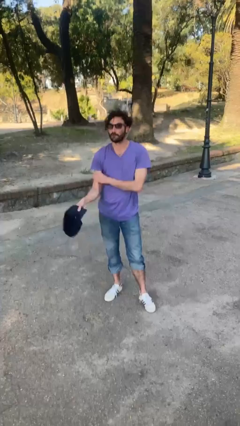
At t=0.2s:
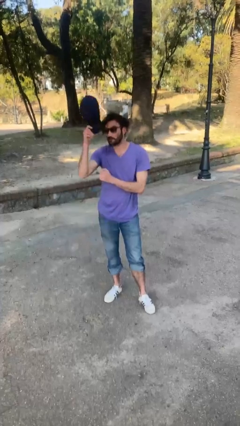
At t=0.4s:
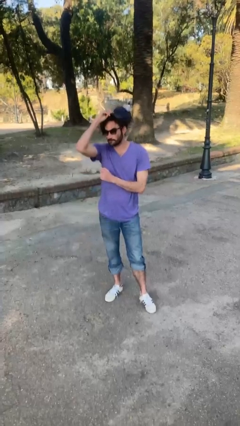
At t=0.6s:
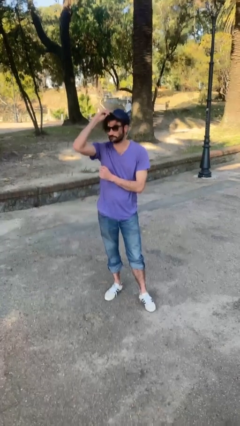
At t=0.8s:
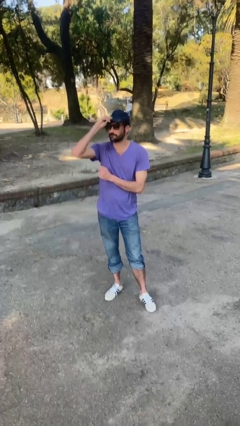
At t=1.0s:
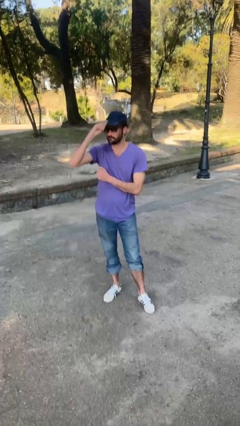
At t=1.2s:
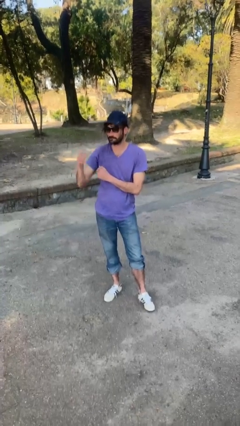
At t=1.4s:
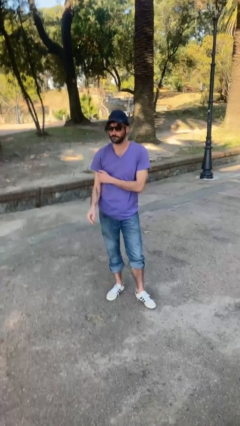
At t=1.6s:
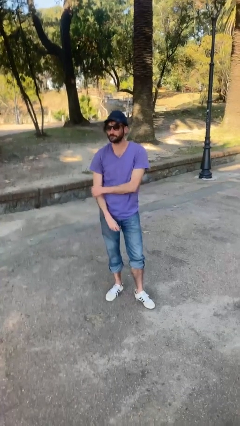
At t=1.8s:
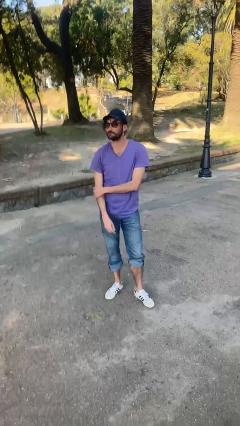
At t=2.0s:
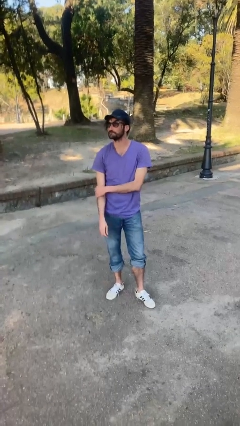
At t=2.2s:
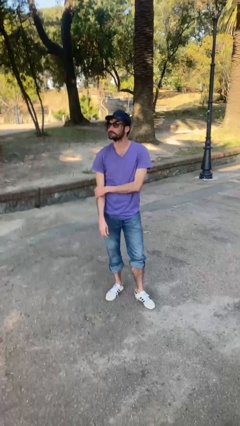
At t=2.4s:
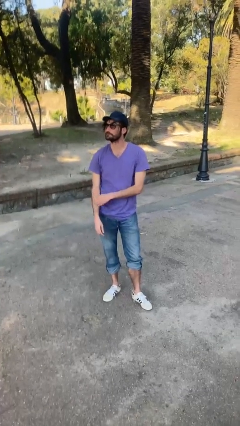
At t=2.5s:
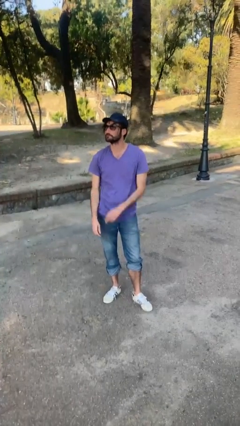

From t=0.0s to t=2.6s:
person puts on hat

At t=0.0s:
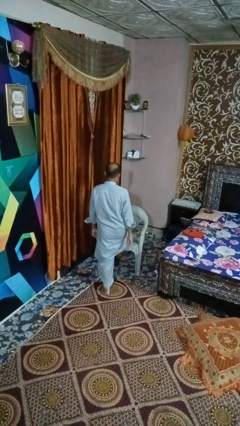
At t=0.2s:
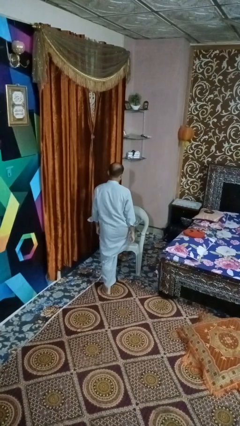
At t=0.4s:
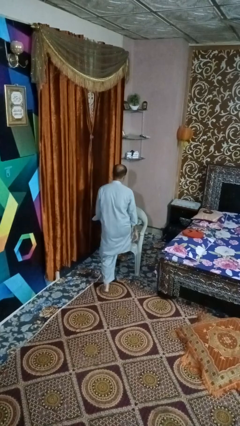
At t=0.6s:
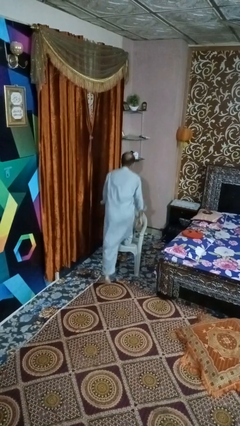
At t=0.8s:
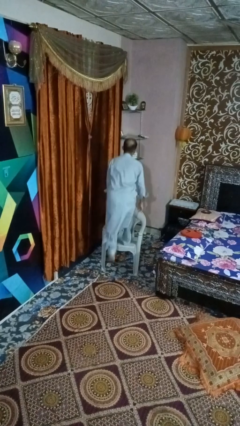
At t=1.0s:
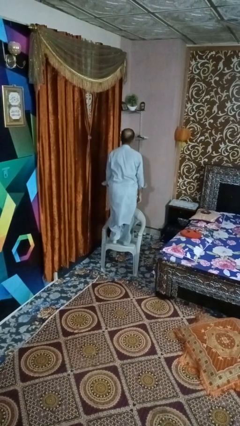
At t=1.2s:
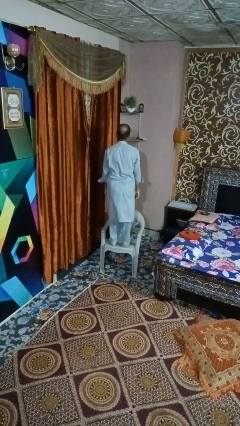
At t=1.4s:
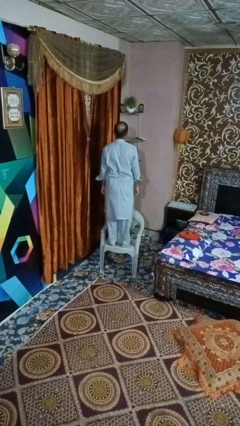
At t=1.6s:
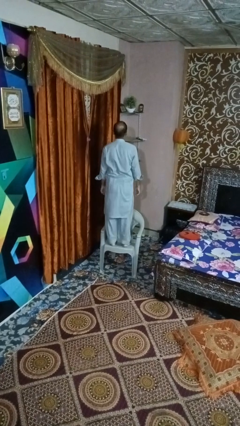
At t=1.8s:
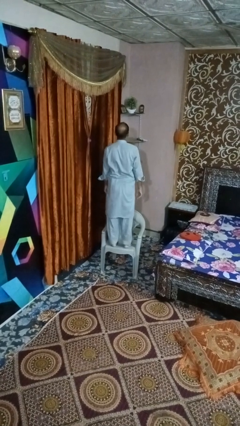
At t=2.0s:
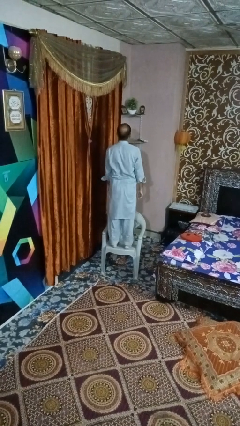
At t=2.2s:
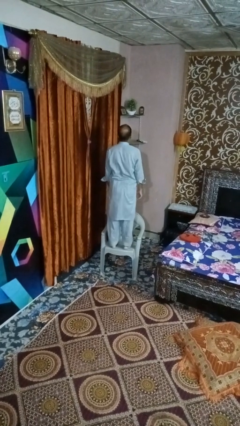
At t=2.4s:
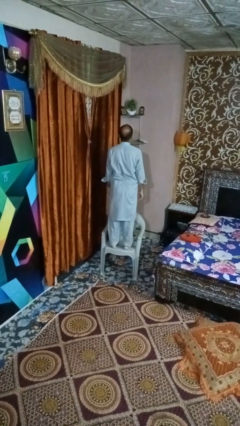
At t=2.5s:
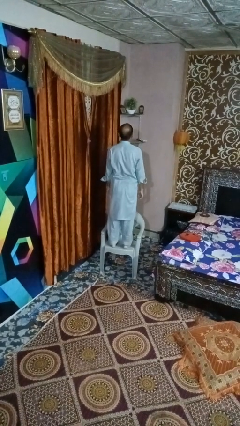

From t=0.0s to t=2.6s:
person climbs on chair

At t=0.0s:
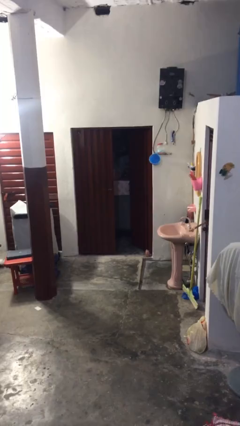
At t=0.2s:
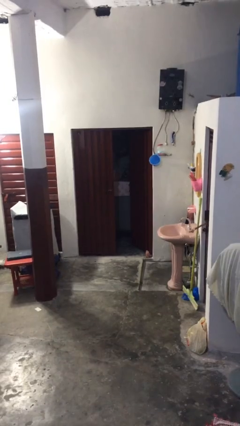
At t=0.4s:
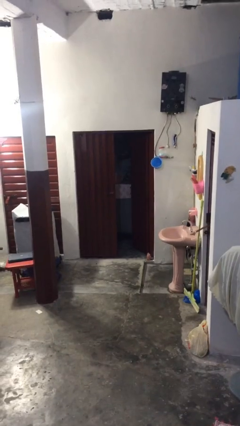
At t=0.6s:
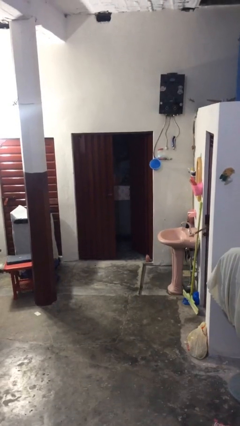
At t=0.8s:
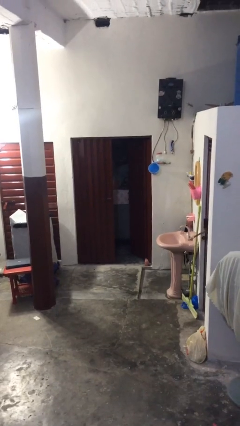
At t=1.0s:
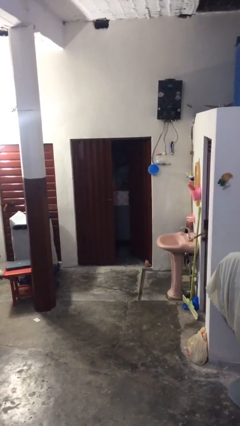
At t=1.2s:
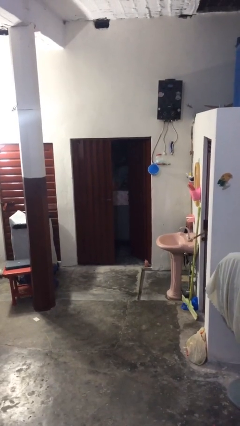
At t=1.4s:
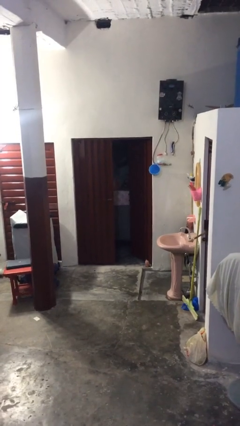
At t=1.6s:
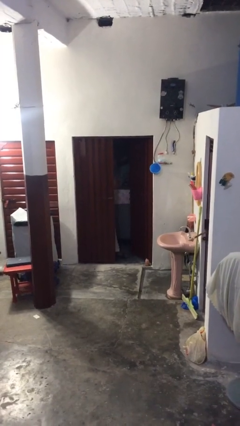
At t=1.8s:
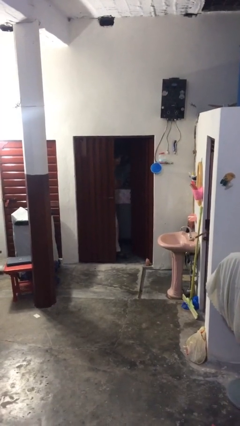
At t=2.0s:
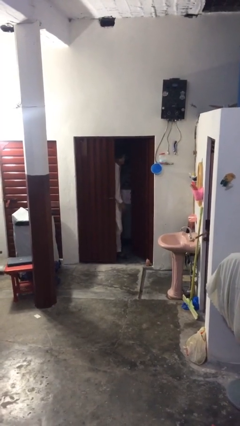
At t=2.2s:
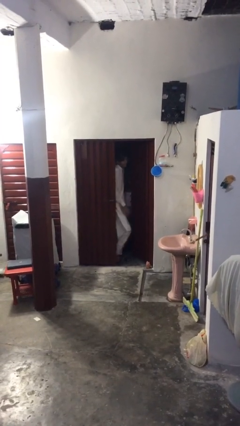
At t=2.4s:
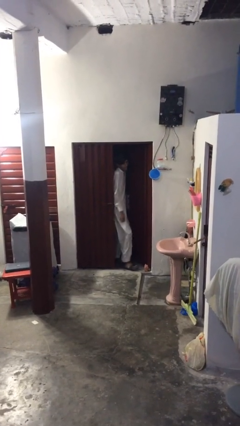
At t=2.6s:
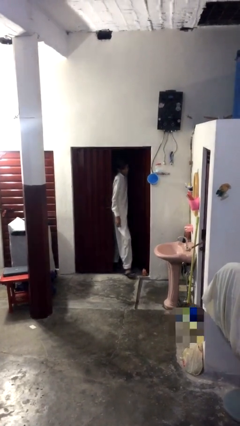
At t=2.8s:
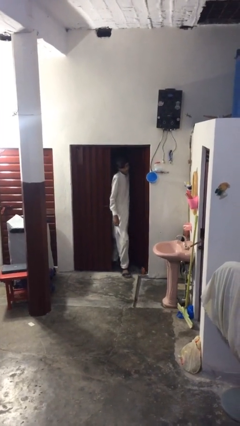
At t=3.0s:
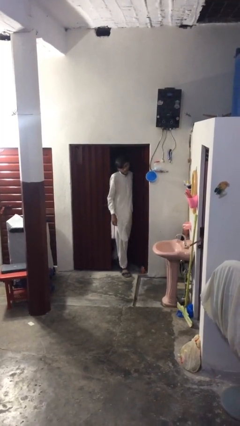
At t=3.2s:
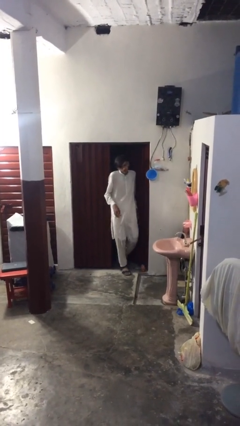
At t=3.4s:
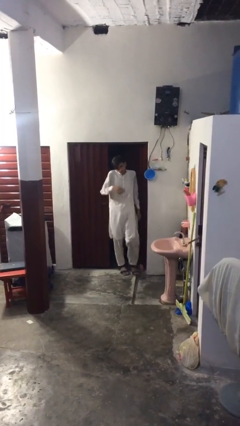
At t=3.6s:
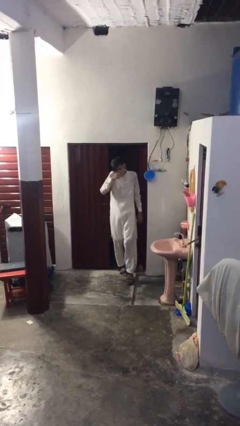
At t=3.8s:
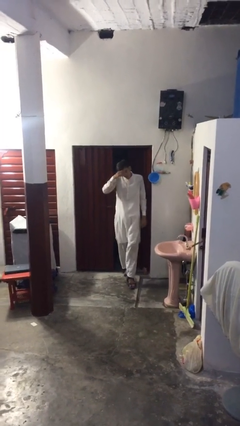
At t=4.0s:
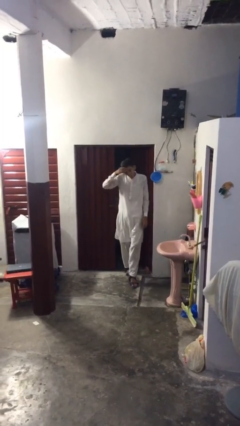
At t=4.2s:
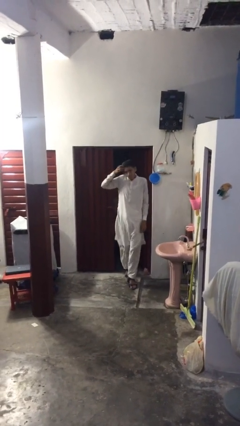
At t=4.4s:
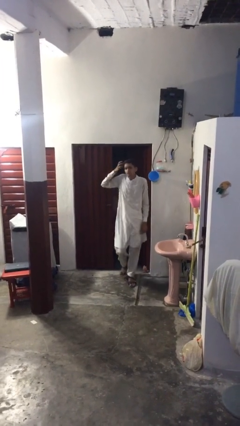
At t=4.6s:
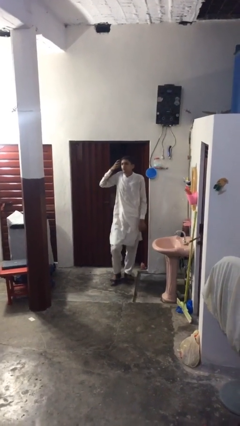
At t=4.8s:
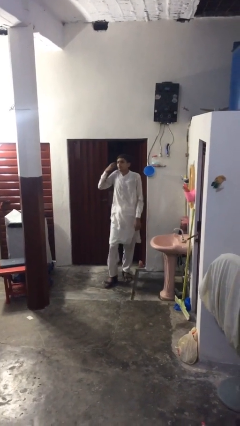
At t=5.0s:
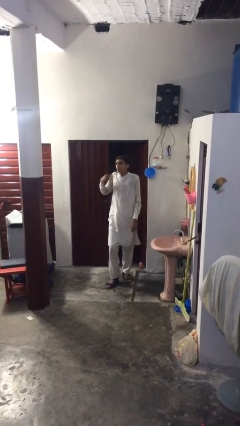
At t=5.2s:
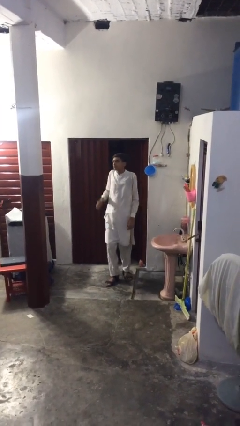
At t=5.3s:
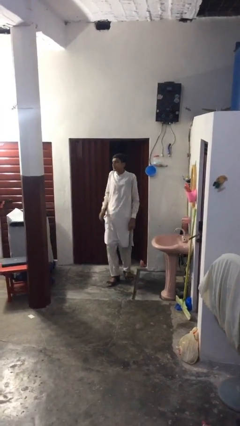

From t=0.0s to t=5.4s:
person enters scene through structure

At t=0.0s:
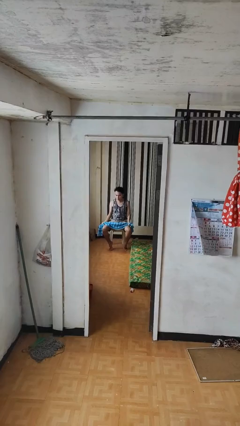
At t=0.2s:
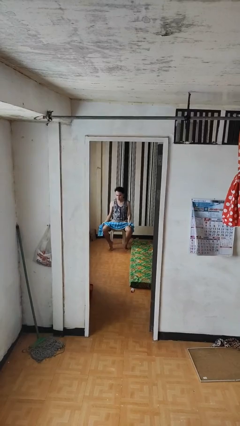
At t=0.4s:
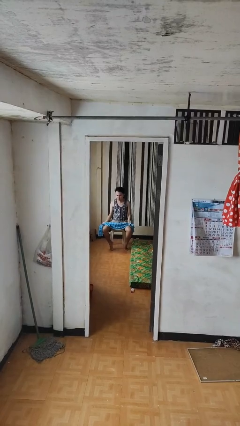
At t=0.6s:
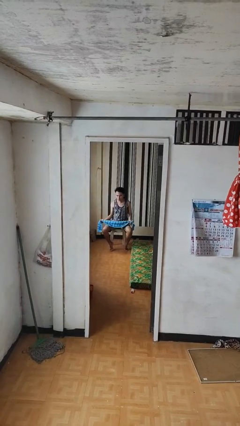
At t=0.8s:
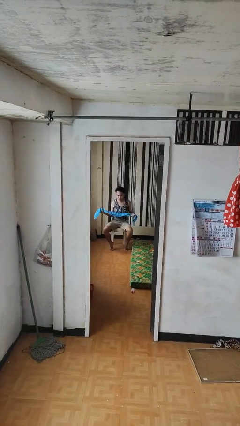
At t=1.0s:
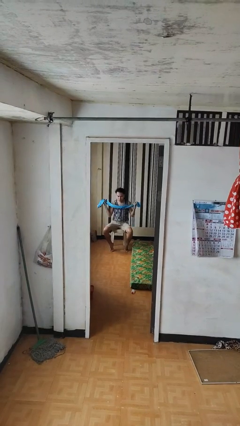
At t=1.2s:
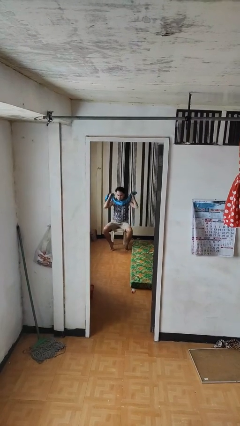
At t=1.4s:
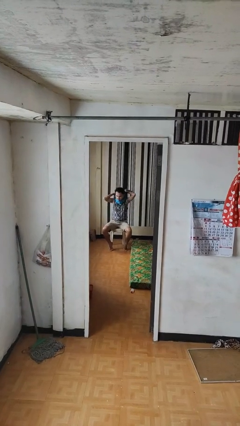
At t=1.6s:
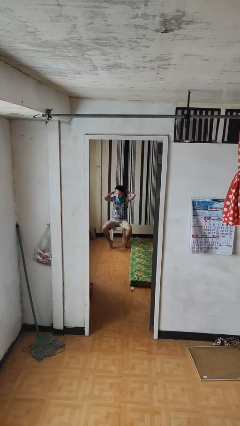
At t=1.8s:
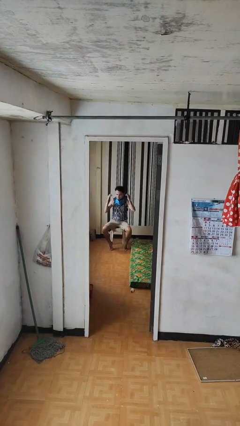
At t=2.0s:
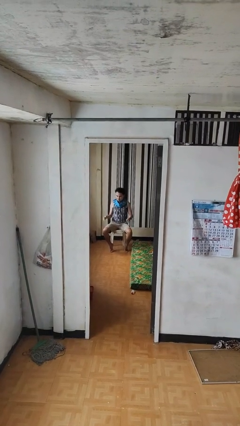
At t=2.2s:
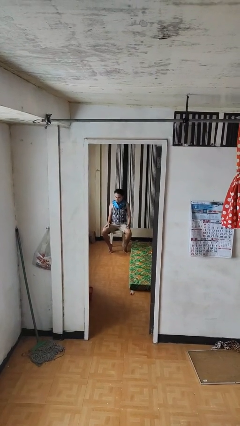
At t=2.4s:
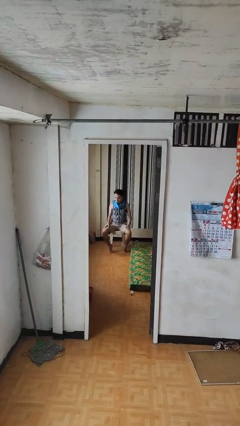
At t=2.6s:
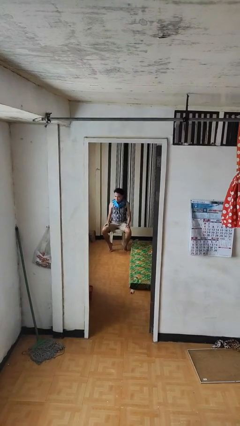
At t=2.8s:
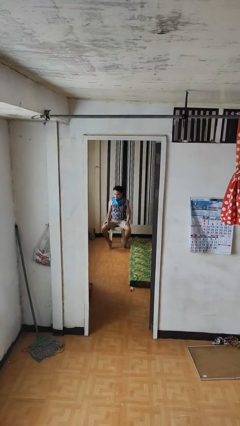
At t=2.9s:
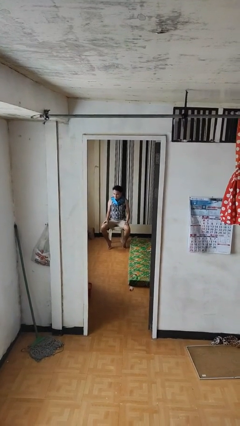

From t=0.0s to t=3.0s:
person puts on scarf

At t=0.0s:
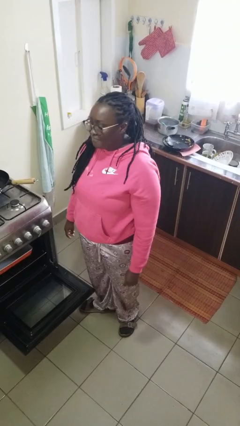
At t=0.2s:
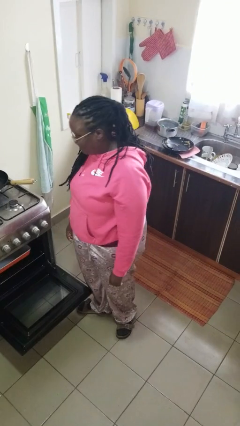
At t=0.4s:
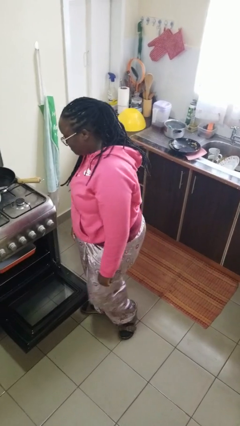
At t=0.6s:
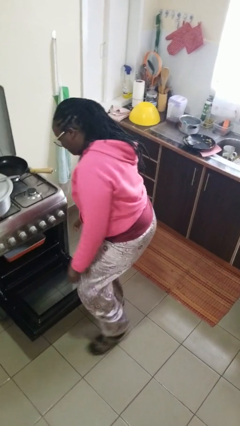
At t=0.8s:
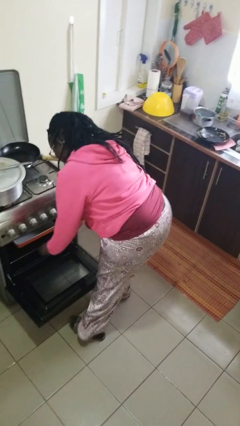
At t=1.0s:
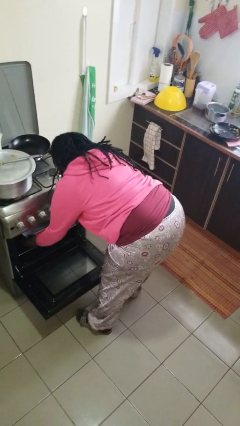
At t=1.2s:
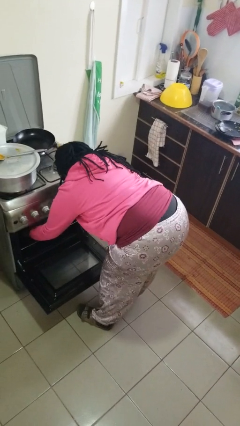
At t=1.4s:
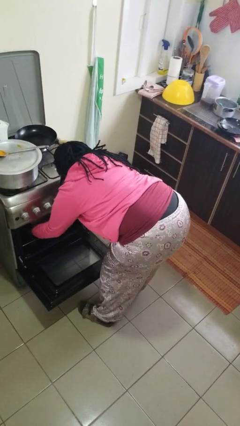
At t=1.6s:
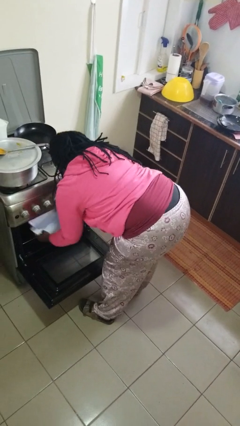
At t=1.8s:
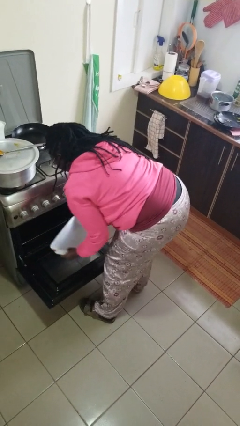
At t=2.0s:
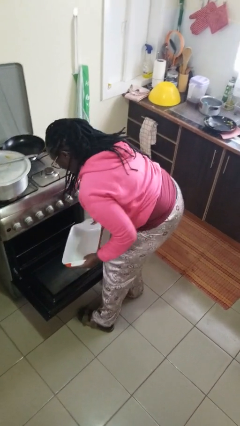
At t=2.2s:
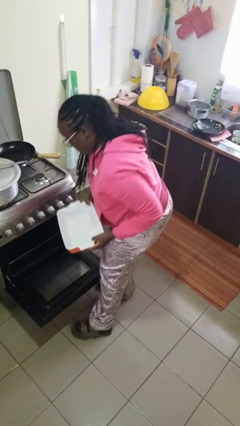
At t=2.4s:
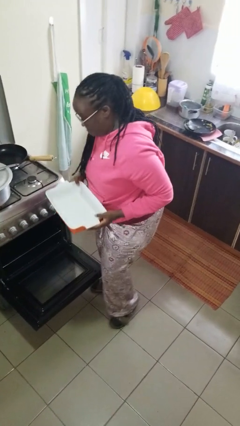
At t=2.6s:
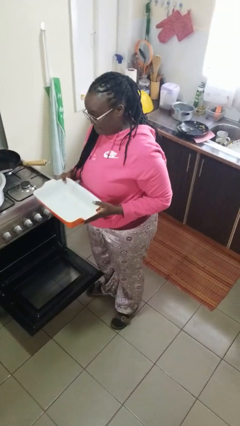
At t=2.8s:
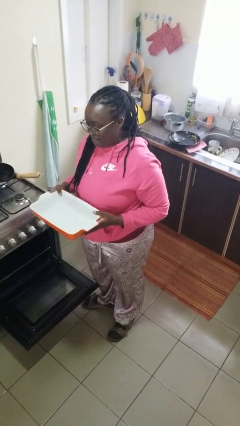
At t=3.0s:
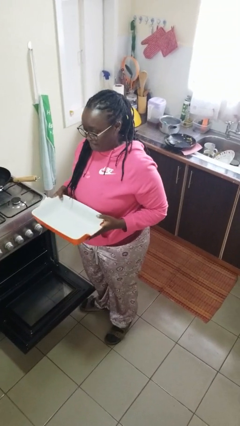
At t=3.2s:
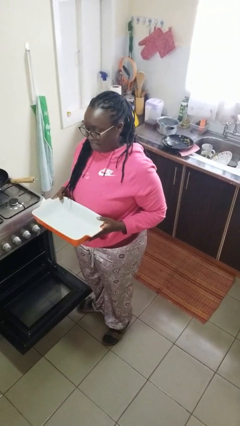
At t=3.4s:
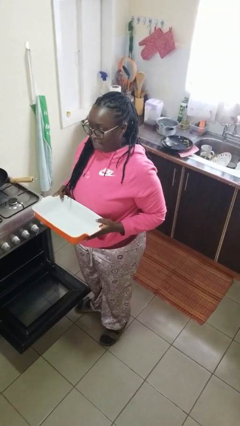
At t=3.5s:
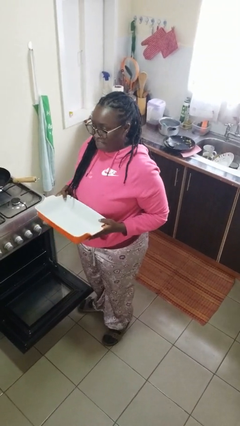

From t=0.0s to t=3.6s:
person takes object from oven

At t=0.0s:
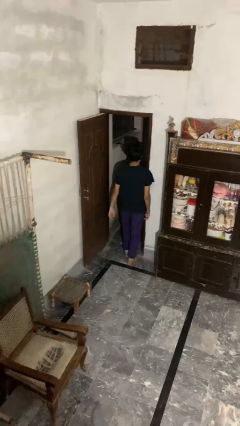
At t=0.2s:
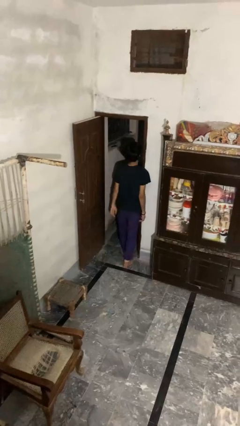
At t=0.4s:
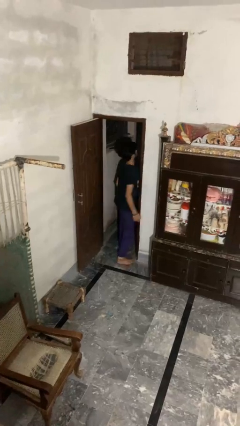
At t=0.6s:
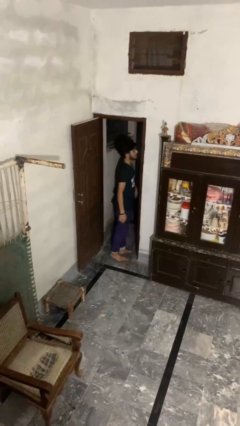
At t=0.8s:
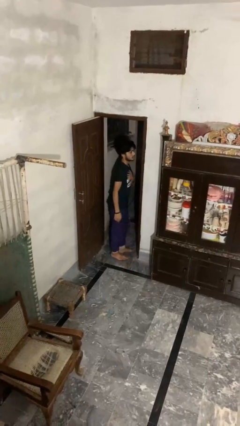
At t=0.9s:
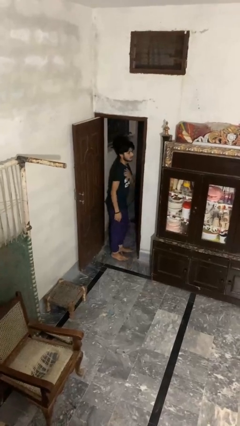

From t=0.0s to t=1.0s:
person bumps into wall
